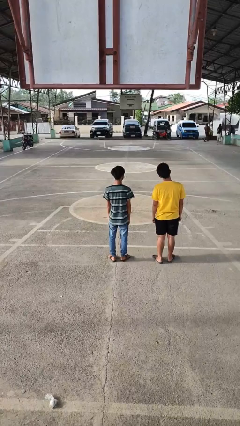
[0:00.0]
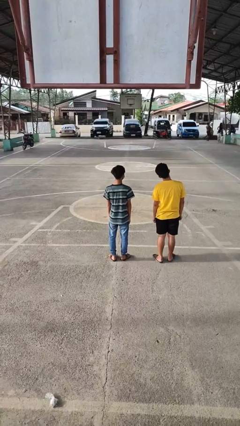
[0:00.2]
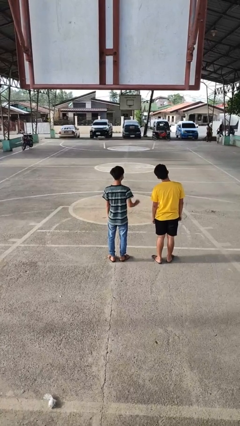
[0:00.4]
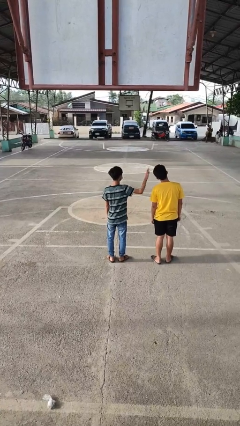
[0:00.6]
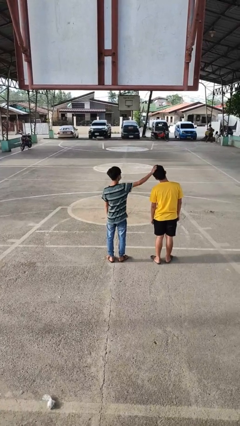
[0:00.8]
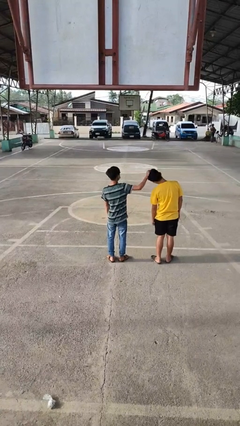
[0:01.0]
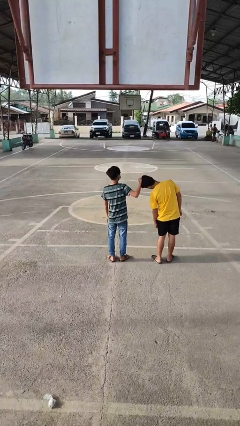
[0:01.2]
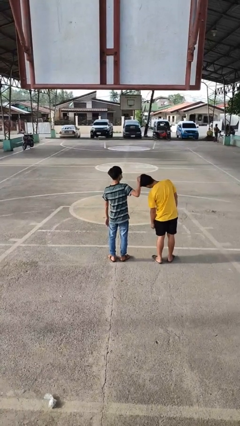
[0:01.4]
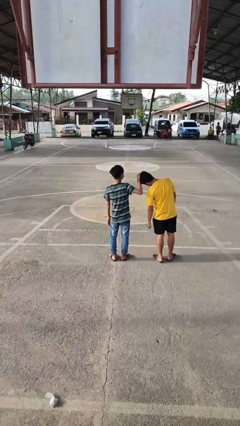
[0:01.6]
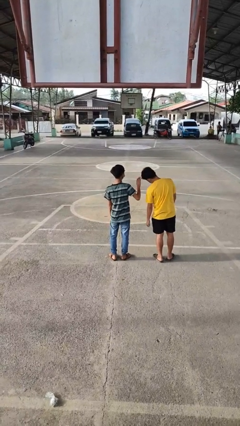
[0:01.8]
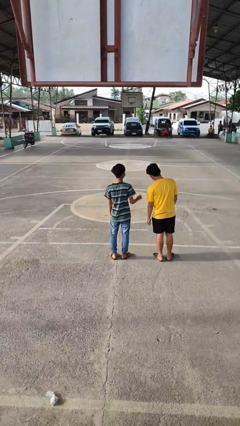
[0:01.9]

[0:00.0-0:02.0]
person grabs person by hair

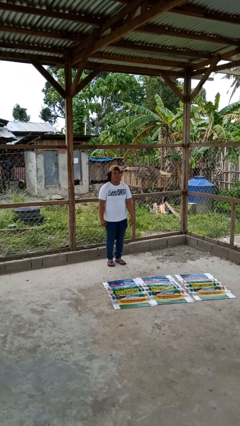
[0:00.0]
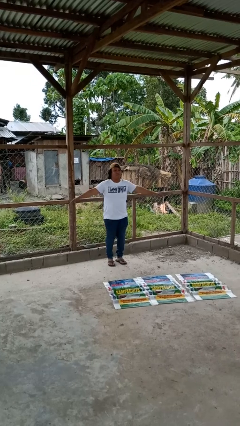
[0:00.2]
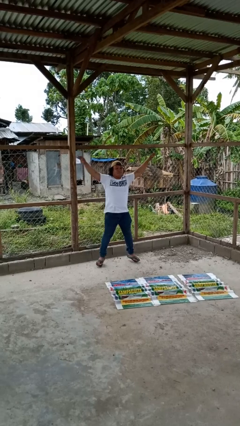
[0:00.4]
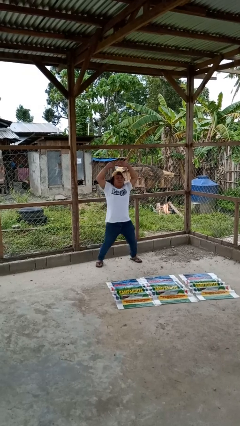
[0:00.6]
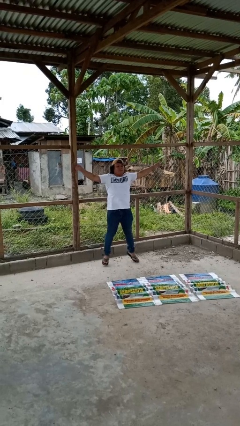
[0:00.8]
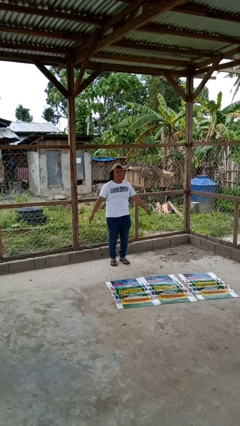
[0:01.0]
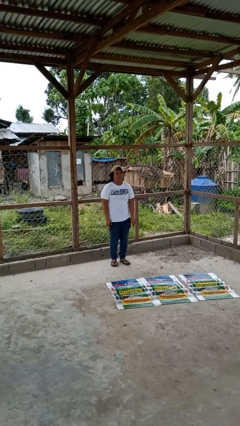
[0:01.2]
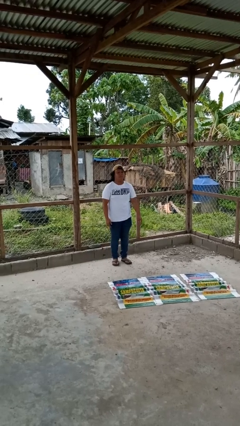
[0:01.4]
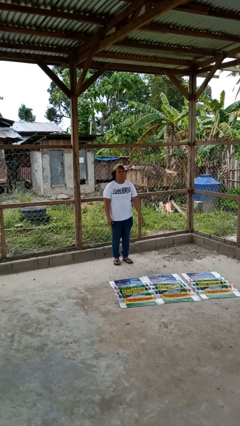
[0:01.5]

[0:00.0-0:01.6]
person exercises with jumping jacks

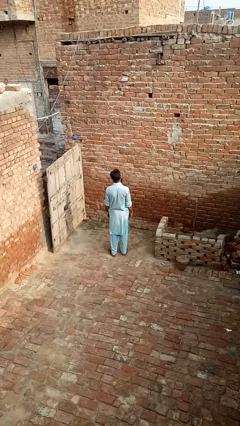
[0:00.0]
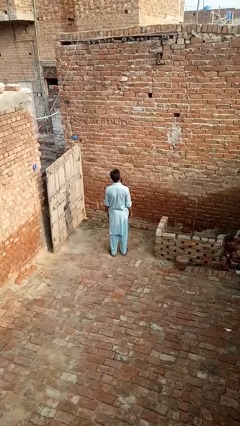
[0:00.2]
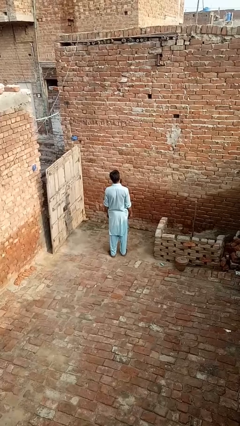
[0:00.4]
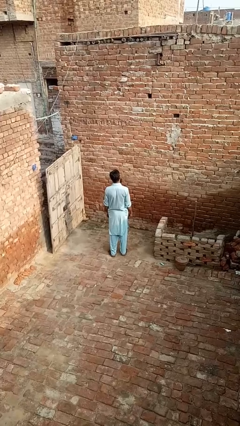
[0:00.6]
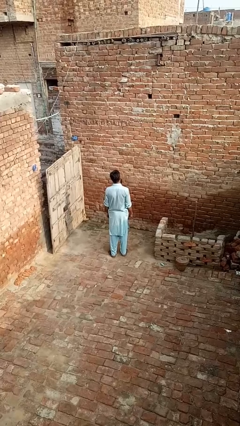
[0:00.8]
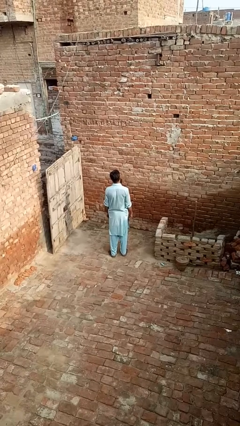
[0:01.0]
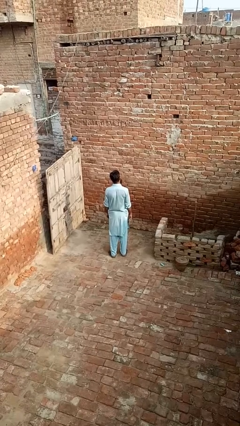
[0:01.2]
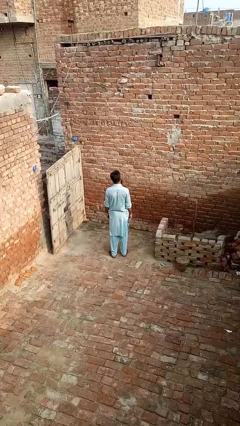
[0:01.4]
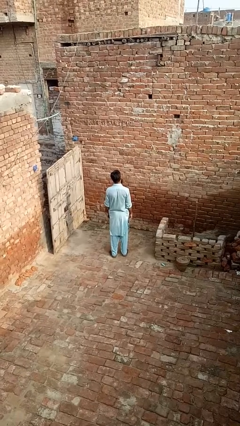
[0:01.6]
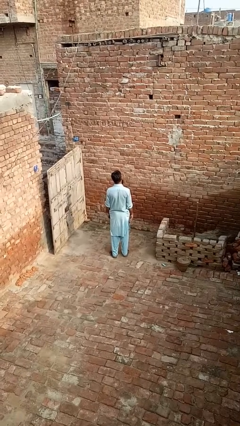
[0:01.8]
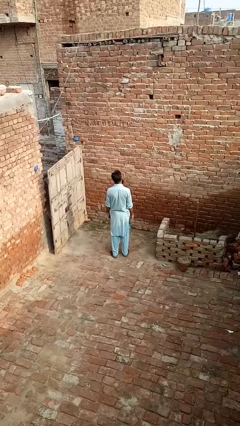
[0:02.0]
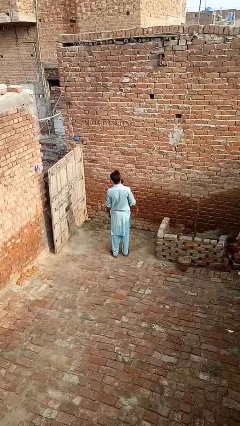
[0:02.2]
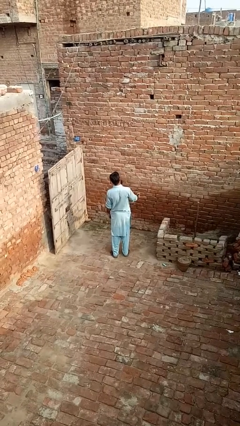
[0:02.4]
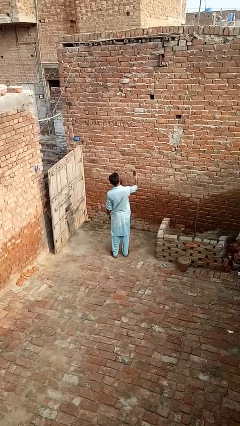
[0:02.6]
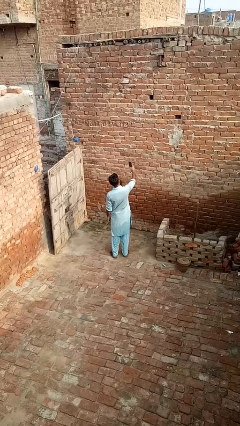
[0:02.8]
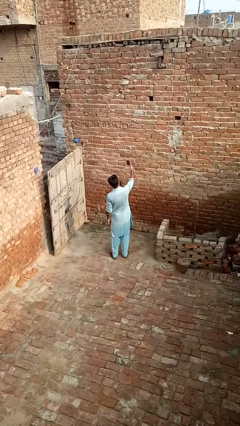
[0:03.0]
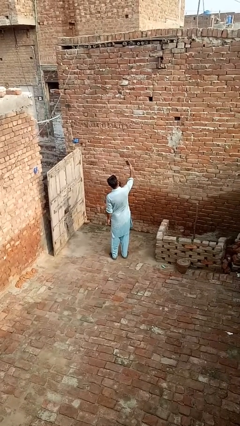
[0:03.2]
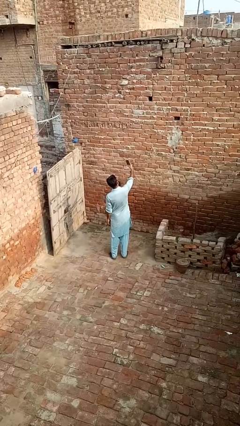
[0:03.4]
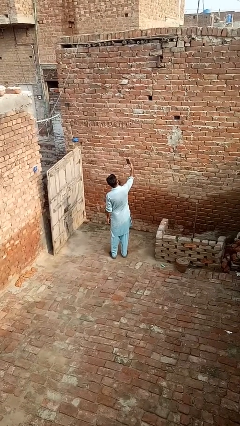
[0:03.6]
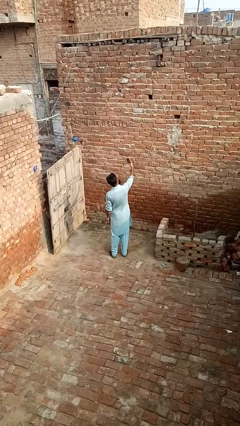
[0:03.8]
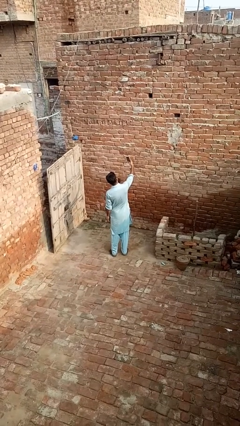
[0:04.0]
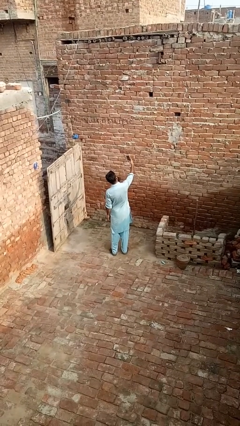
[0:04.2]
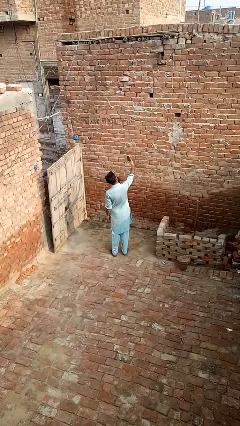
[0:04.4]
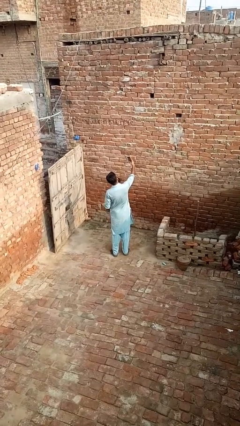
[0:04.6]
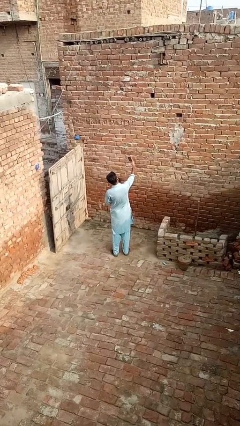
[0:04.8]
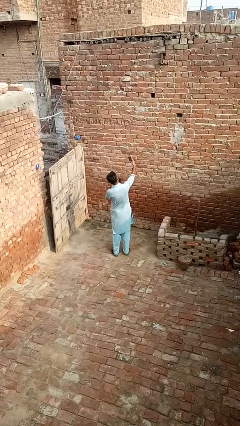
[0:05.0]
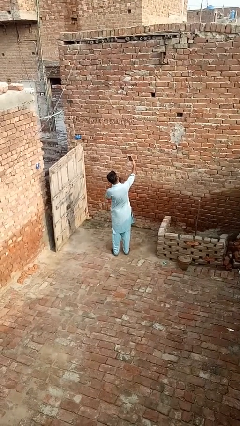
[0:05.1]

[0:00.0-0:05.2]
person takes selfie

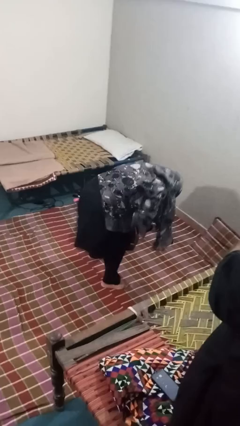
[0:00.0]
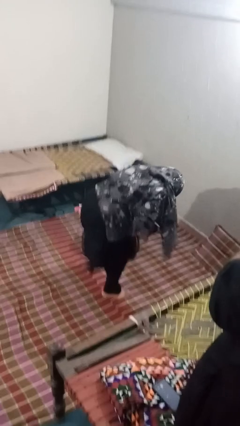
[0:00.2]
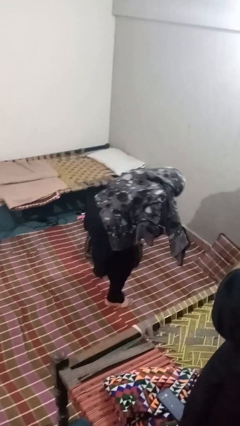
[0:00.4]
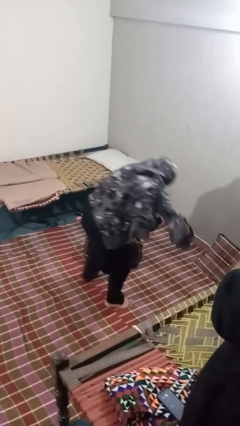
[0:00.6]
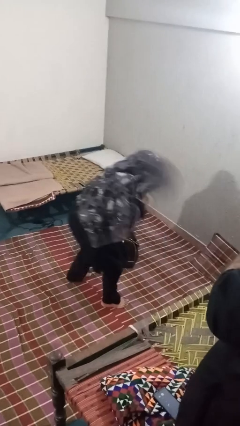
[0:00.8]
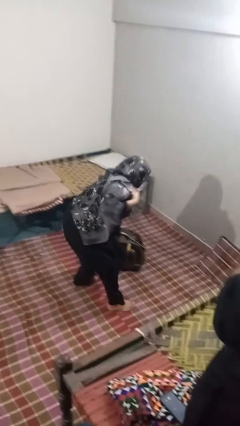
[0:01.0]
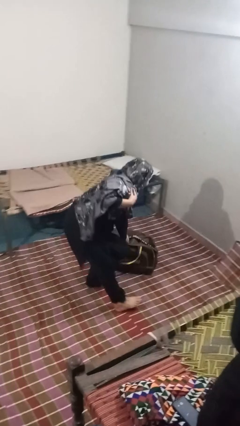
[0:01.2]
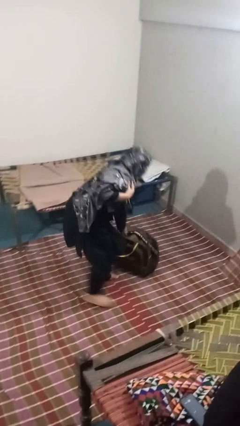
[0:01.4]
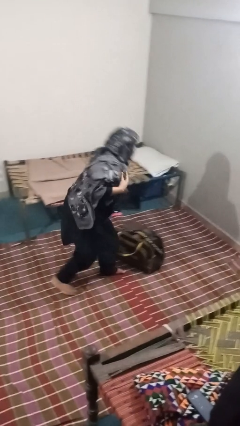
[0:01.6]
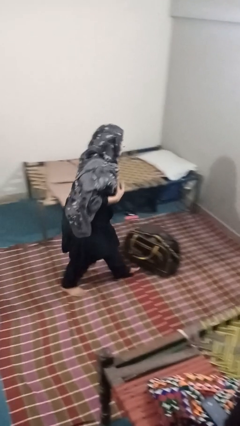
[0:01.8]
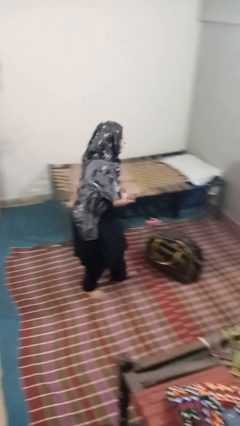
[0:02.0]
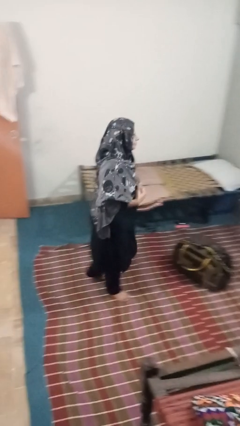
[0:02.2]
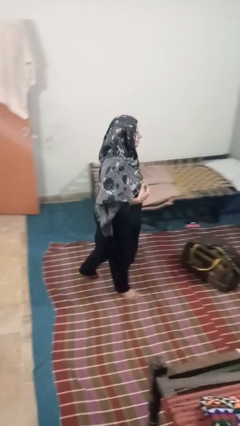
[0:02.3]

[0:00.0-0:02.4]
person stands up from floor

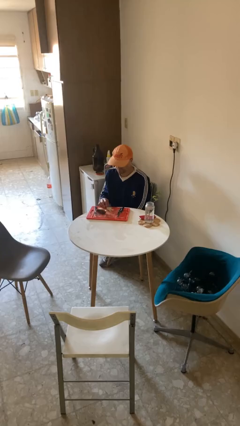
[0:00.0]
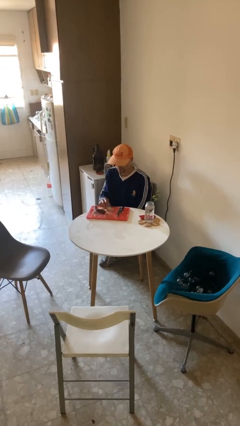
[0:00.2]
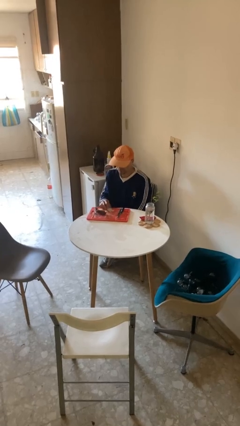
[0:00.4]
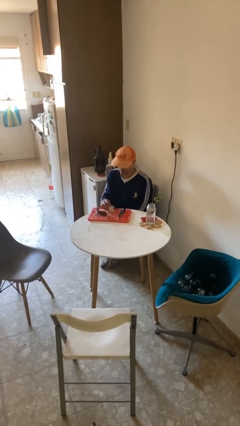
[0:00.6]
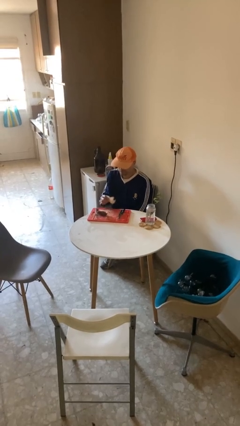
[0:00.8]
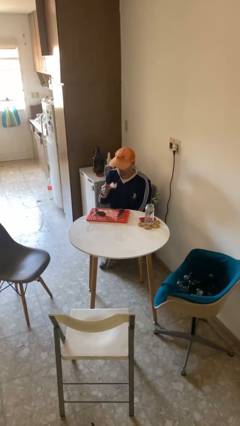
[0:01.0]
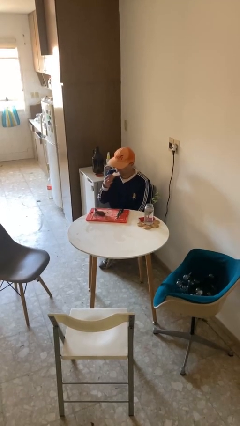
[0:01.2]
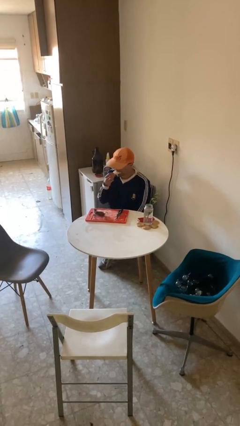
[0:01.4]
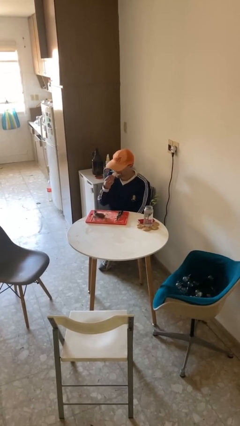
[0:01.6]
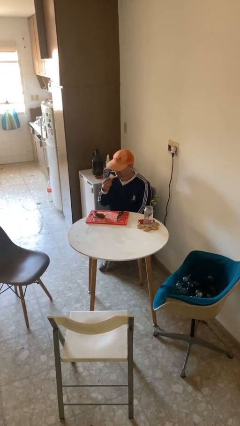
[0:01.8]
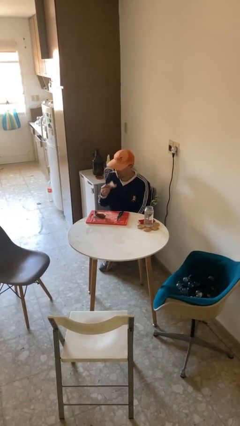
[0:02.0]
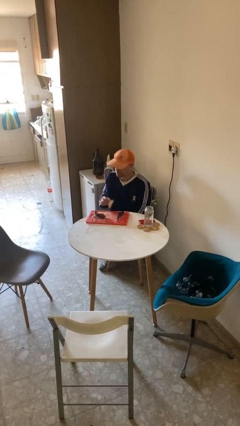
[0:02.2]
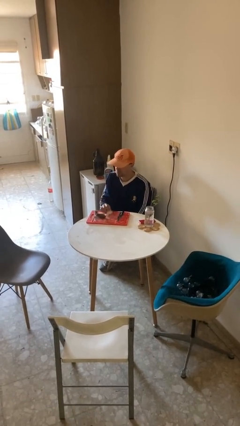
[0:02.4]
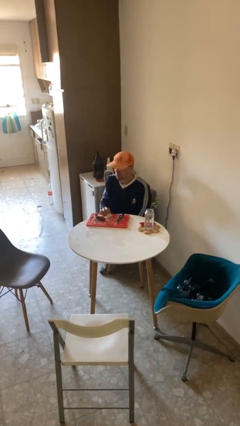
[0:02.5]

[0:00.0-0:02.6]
person eats with hands

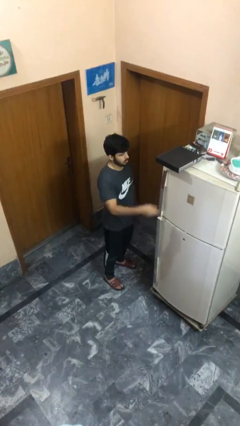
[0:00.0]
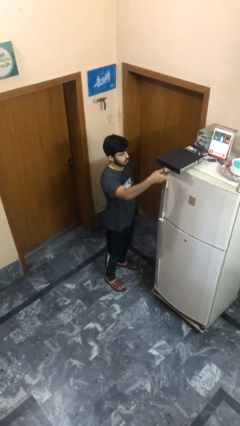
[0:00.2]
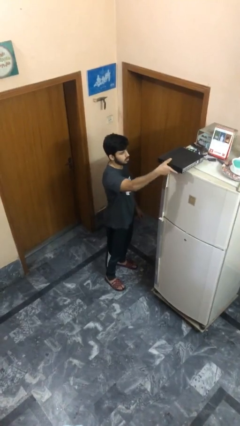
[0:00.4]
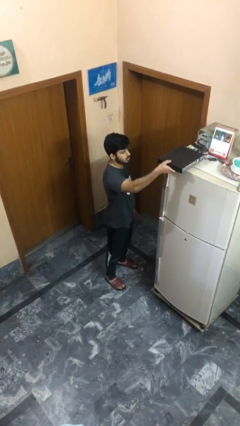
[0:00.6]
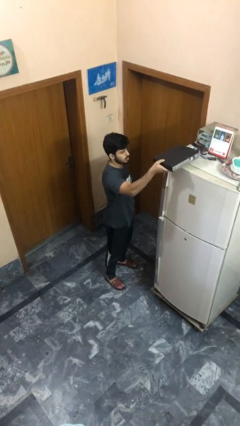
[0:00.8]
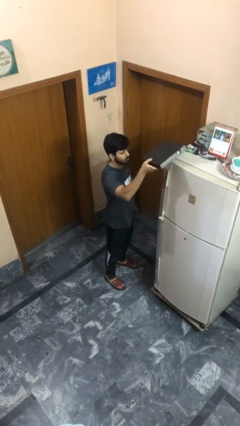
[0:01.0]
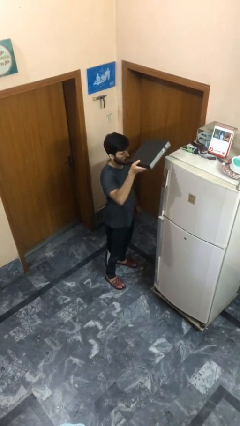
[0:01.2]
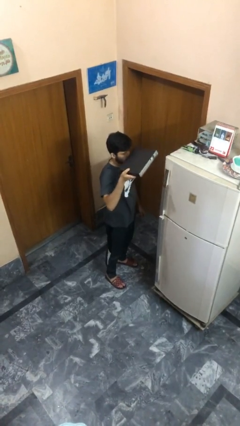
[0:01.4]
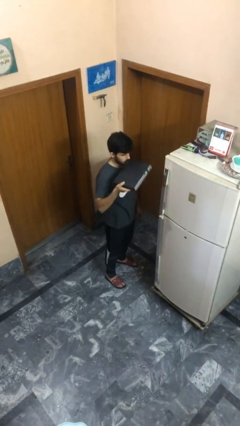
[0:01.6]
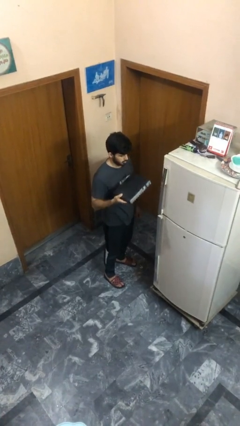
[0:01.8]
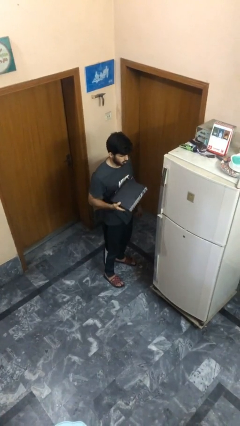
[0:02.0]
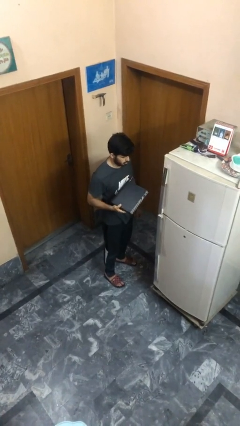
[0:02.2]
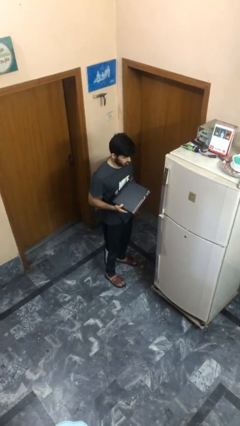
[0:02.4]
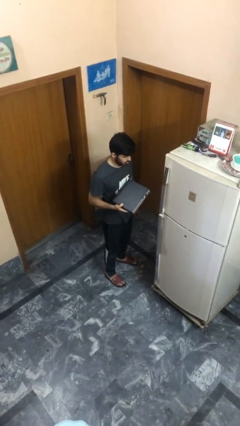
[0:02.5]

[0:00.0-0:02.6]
person picks up object from countertop

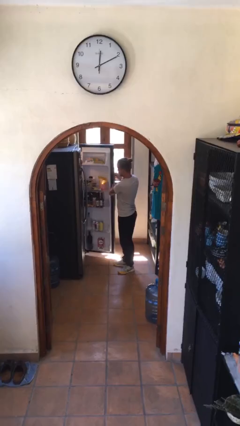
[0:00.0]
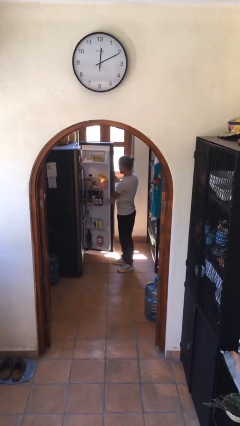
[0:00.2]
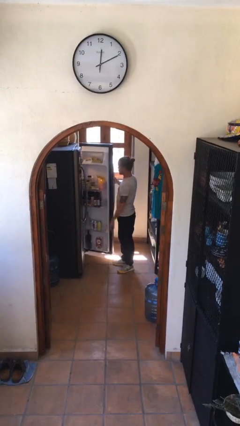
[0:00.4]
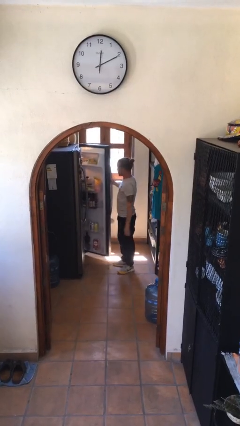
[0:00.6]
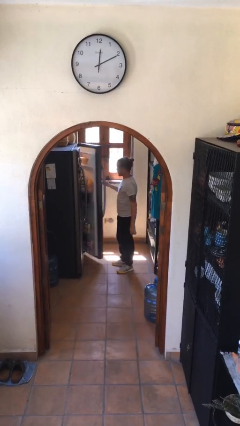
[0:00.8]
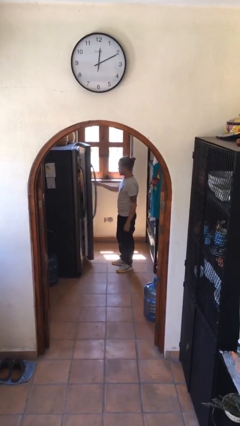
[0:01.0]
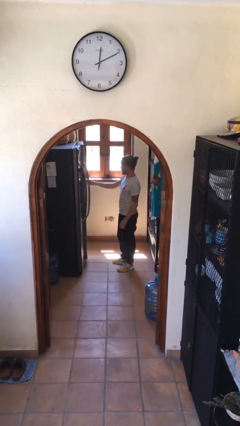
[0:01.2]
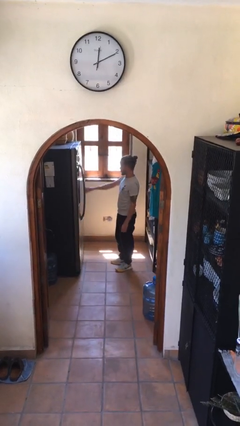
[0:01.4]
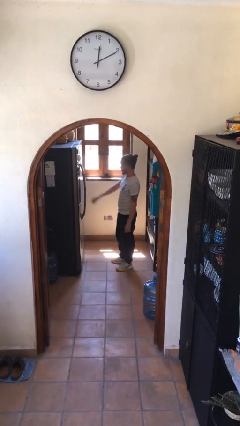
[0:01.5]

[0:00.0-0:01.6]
person closes refrigerator
